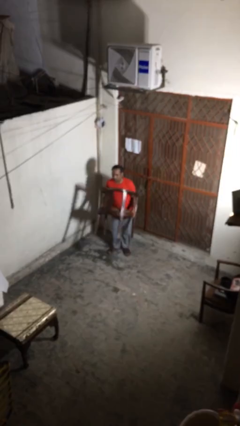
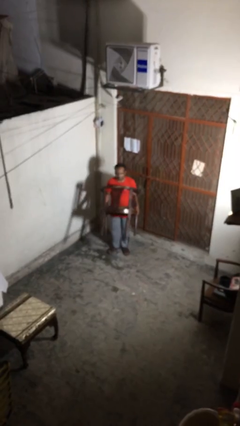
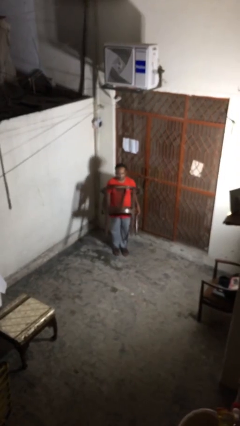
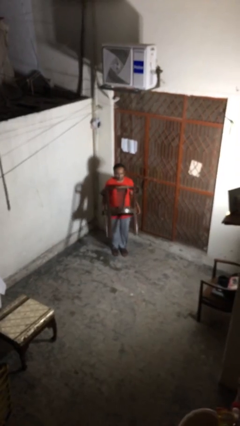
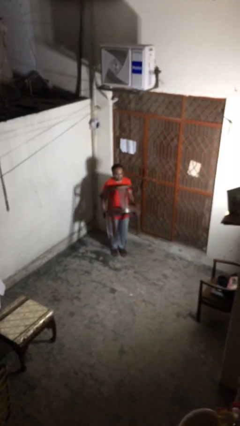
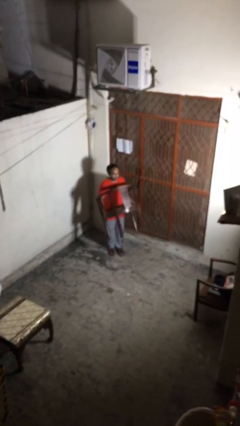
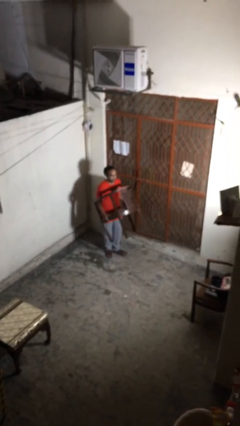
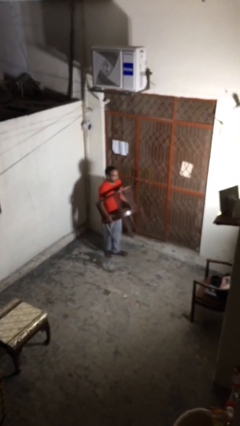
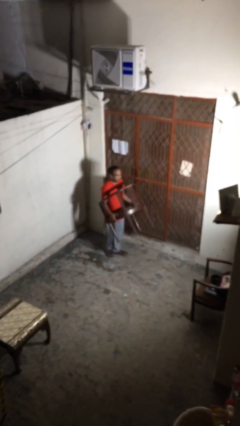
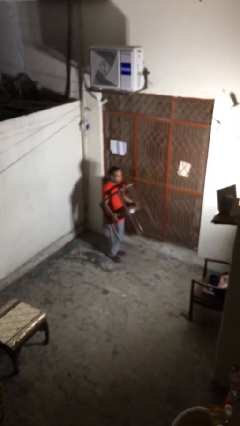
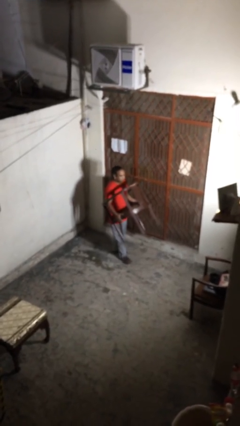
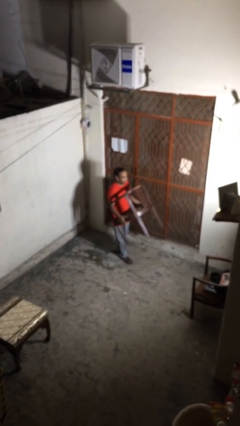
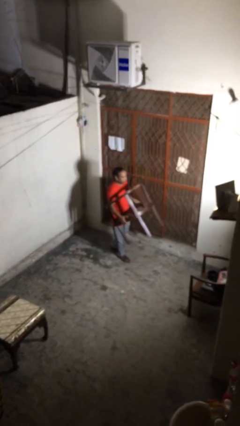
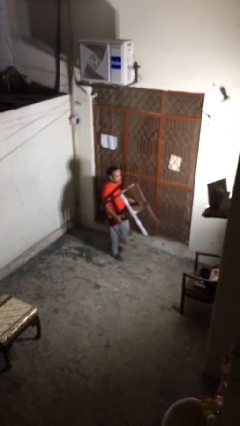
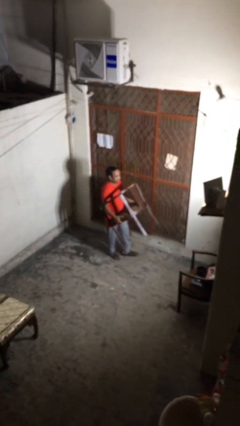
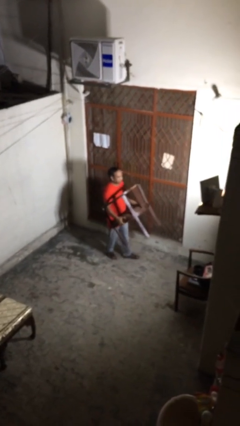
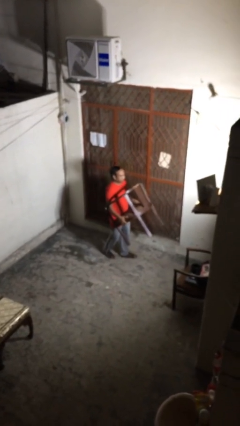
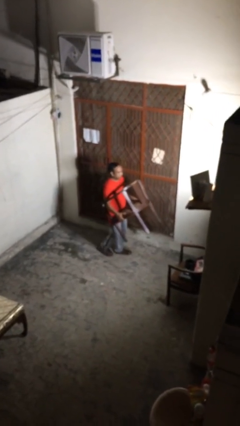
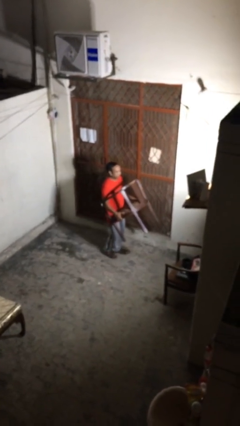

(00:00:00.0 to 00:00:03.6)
person carries heavy object

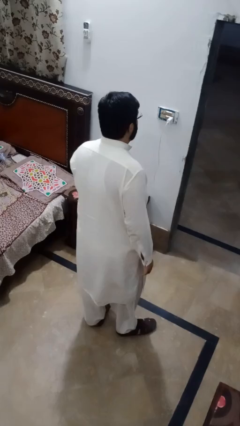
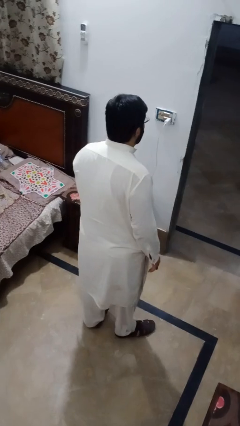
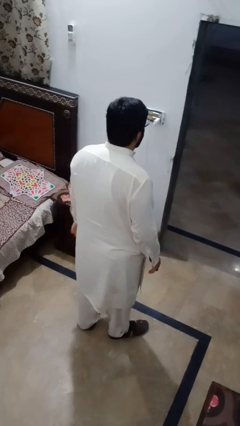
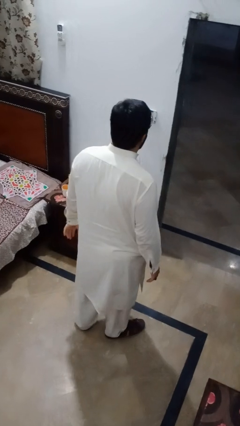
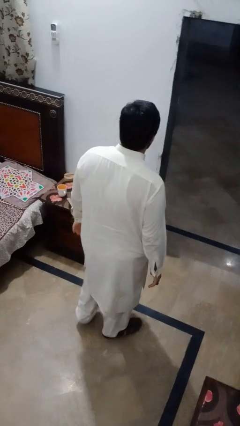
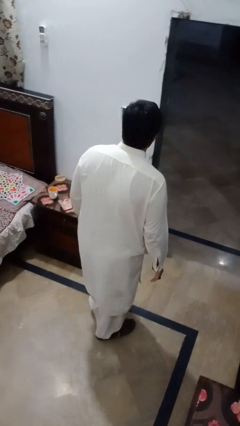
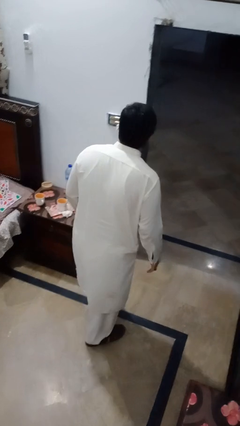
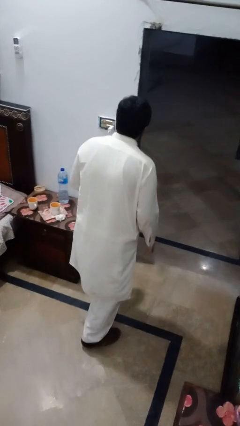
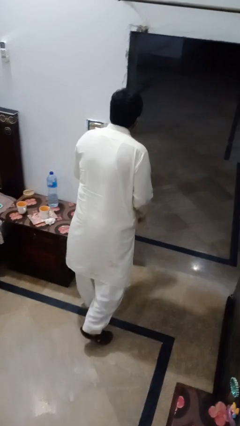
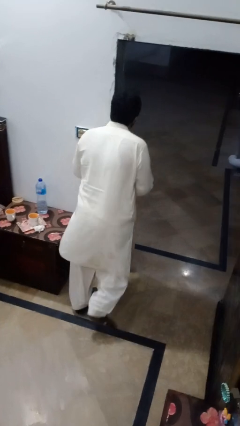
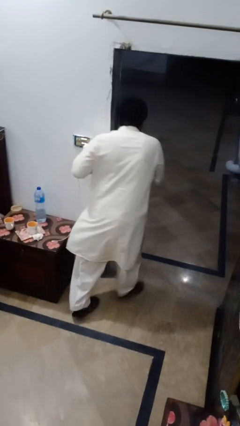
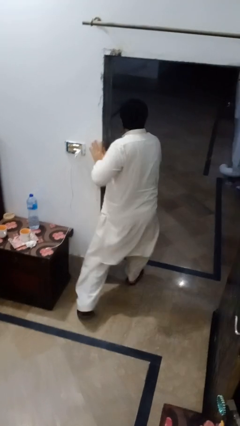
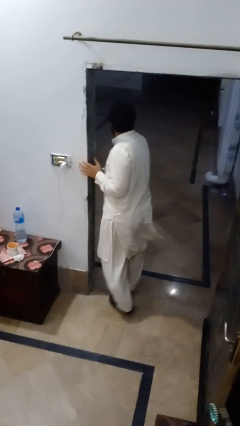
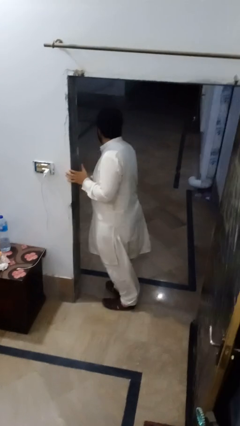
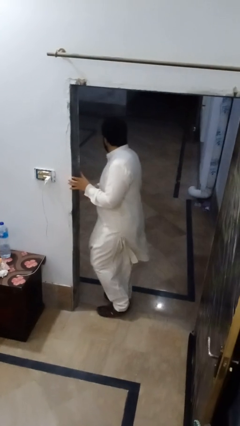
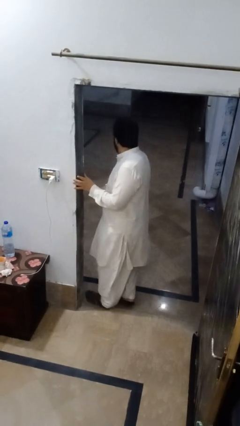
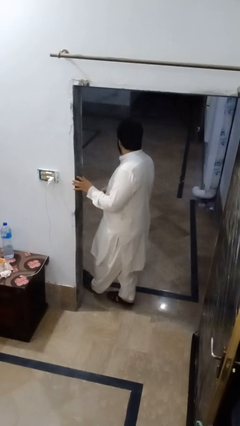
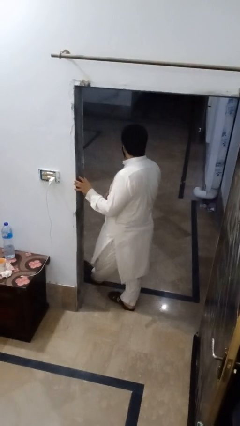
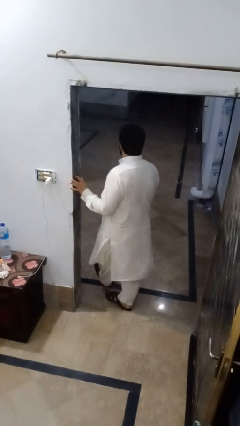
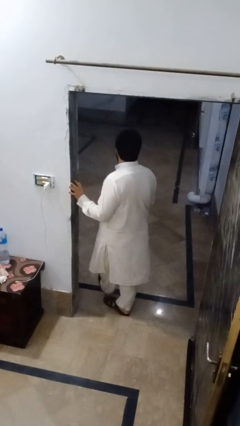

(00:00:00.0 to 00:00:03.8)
person bumps into wall

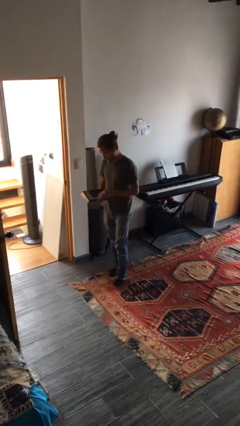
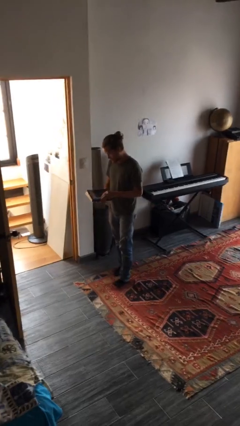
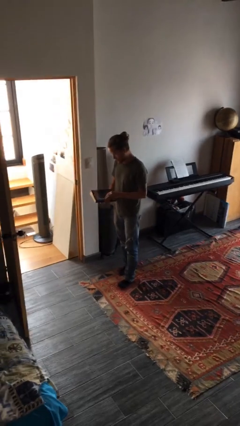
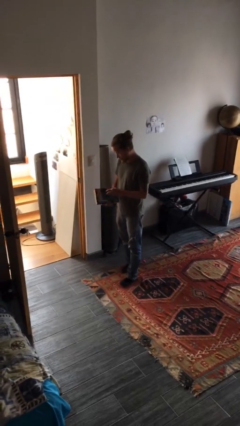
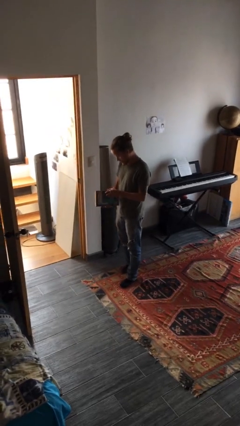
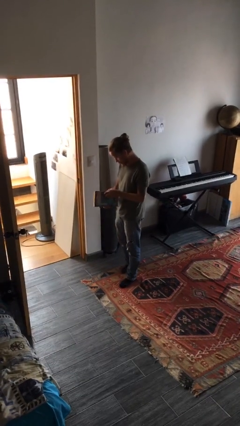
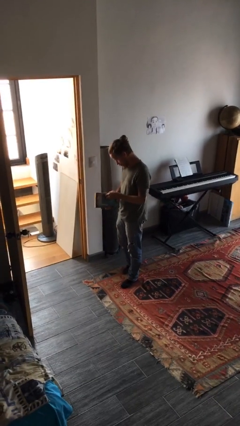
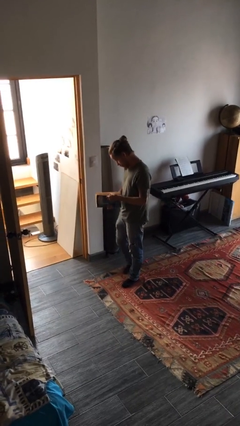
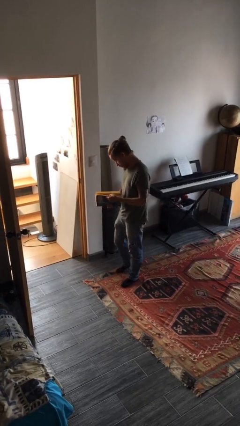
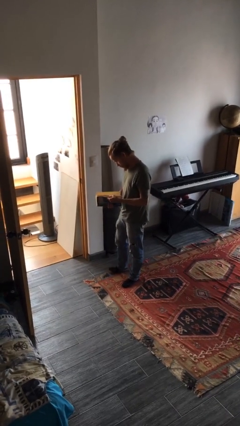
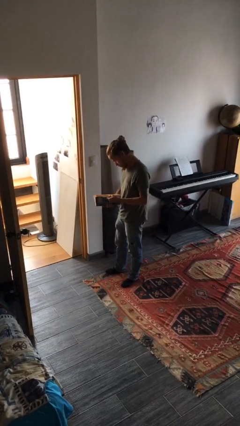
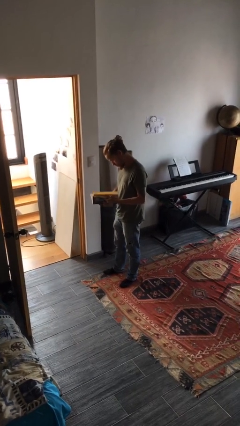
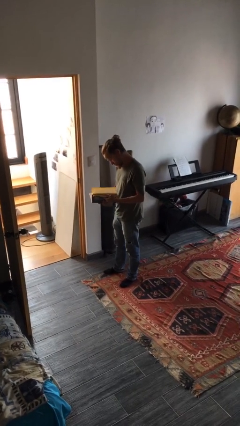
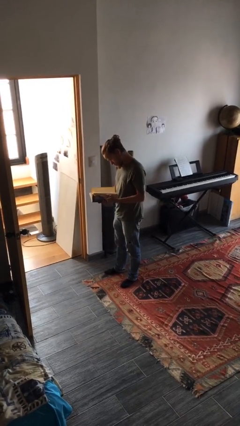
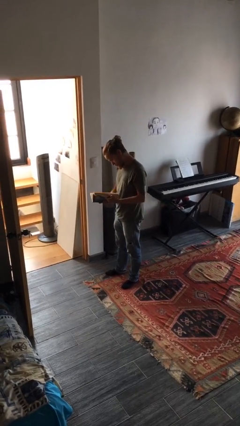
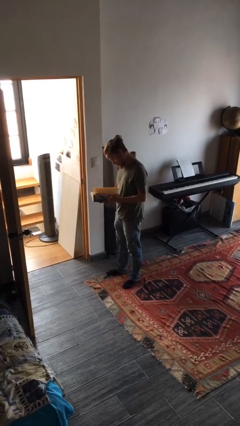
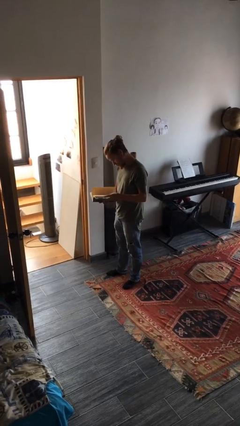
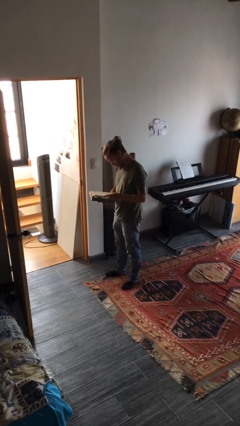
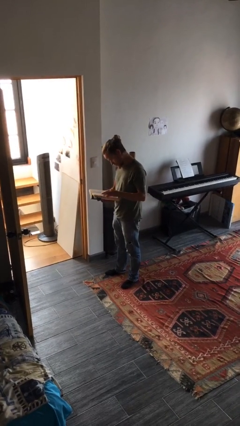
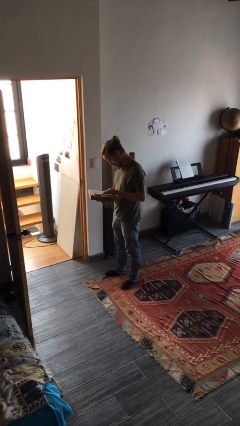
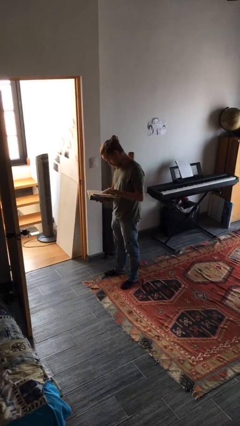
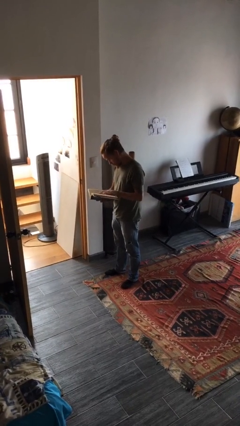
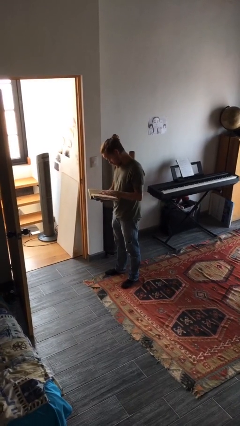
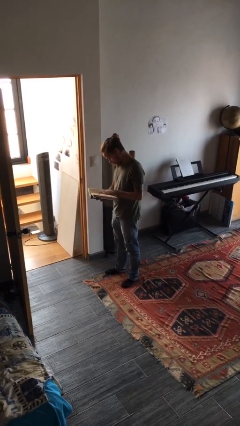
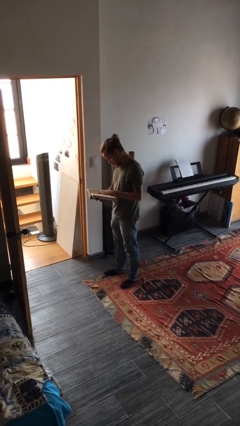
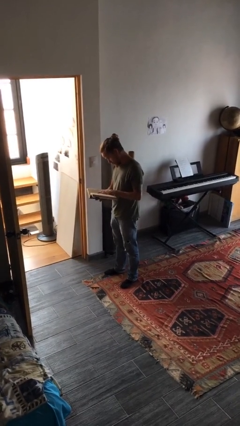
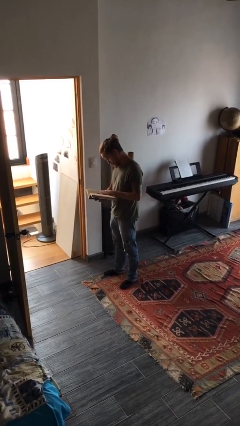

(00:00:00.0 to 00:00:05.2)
person reads book

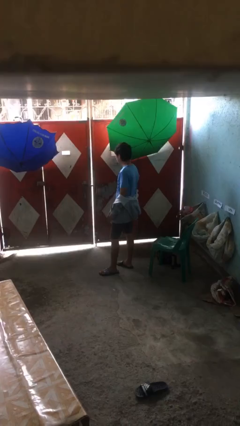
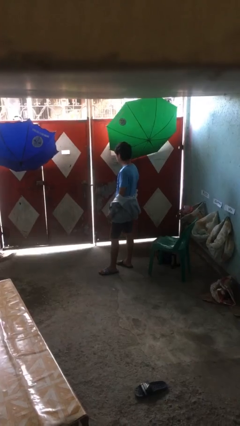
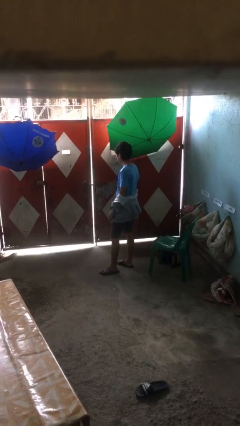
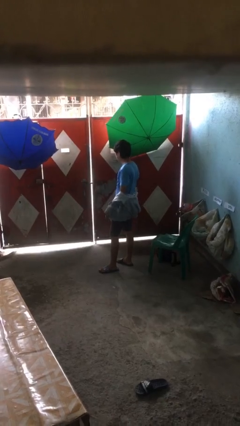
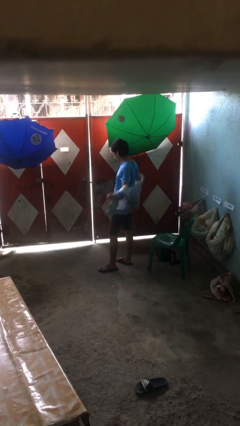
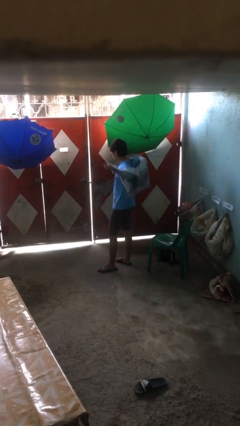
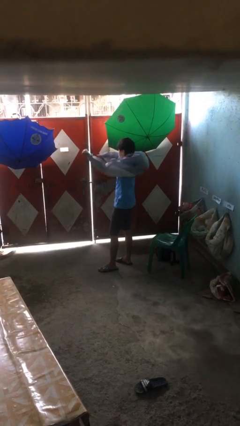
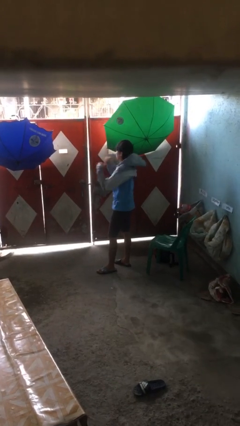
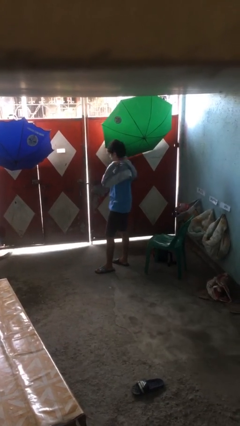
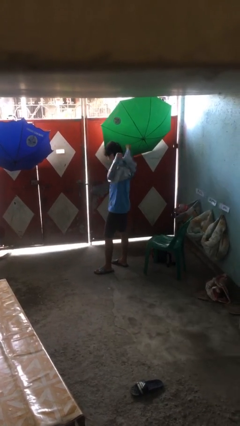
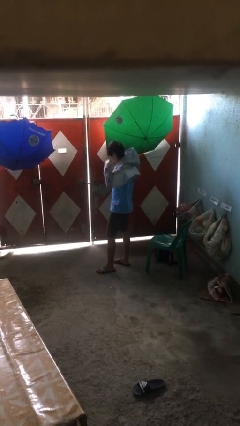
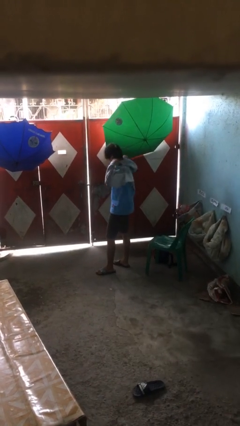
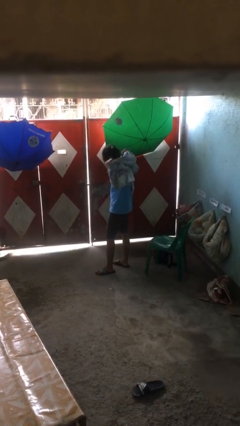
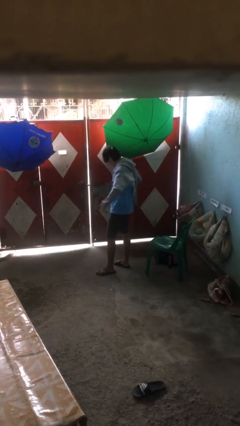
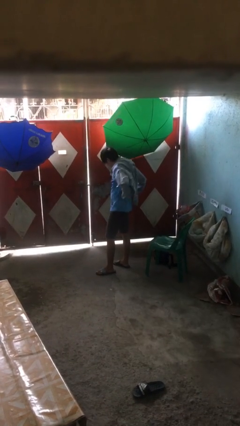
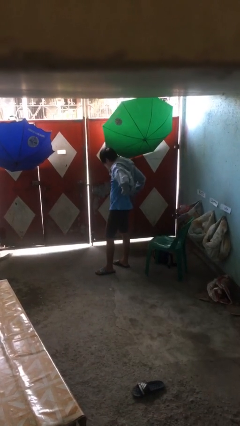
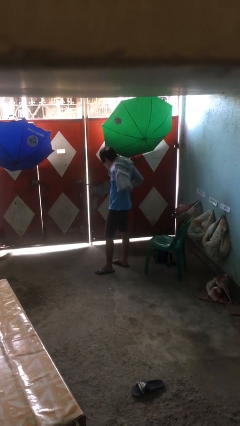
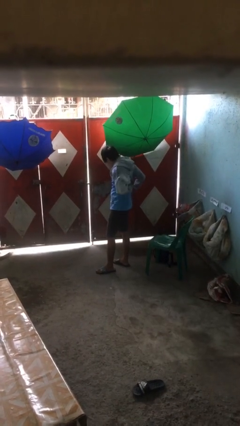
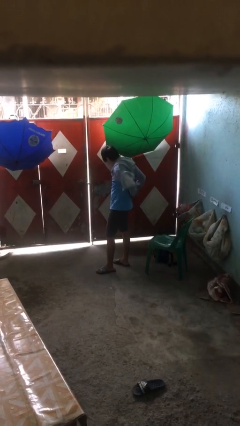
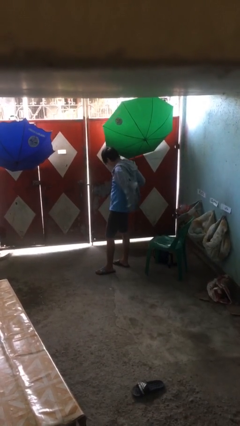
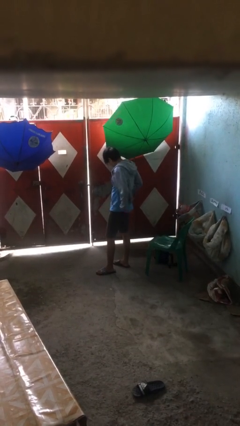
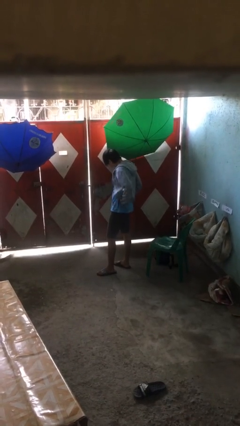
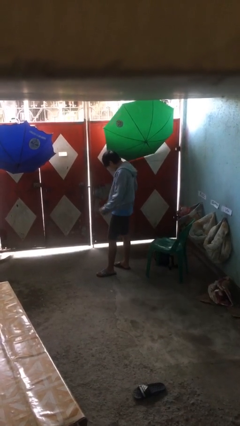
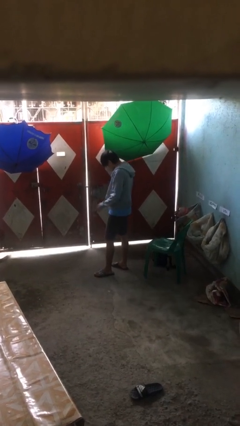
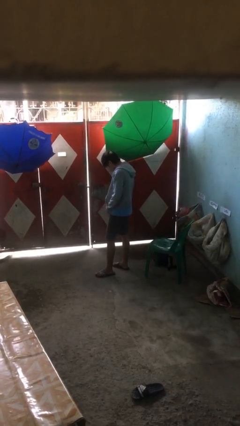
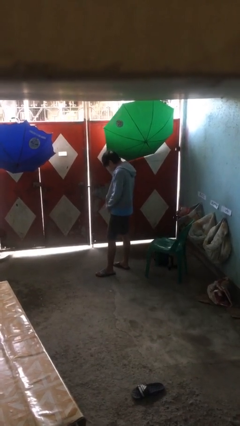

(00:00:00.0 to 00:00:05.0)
person puts on jacket
